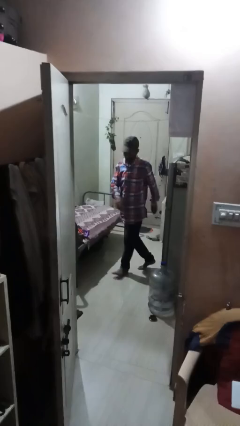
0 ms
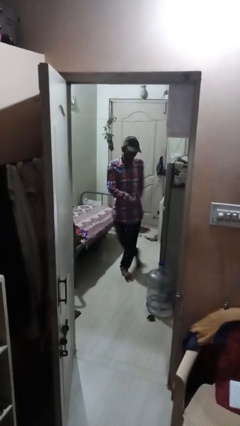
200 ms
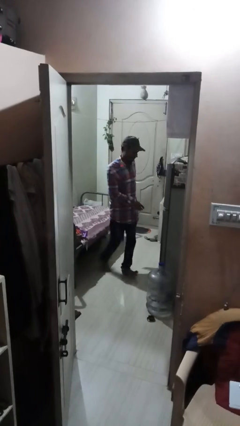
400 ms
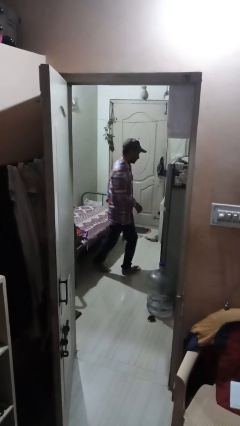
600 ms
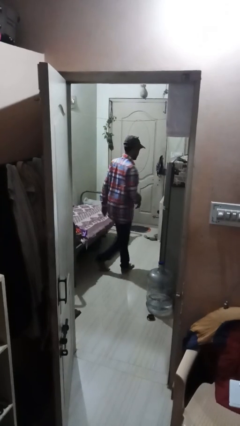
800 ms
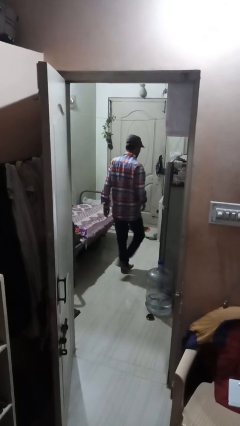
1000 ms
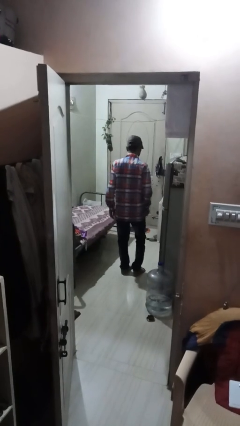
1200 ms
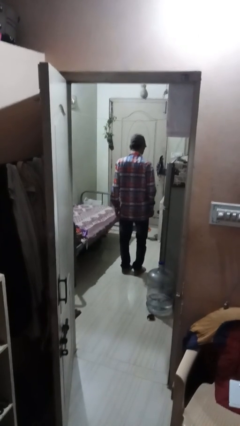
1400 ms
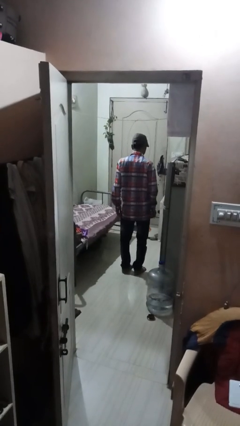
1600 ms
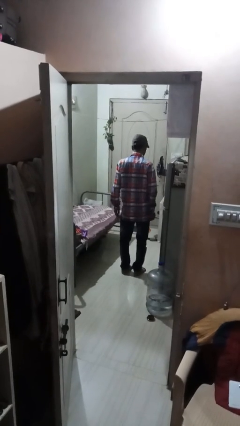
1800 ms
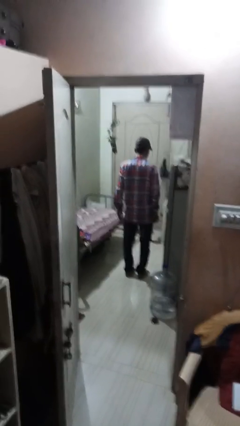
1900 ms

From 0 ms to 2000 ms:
person twirls

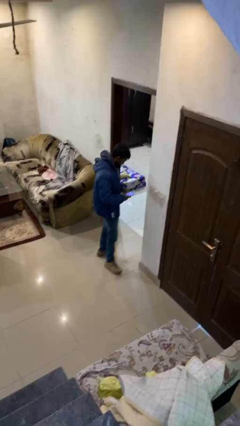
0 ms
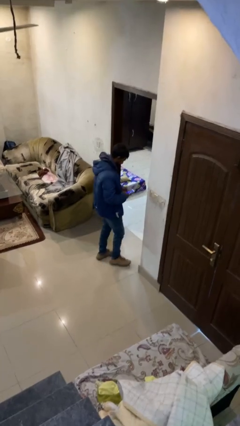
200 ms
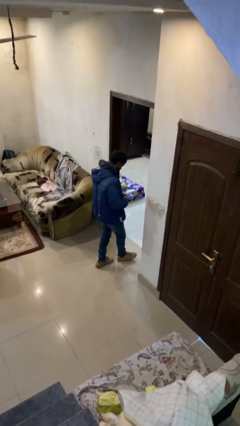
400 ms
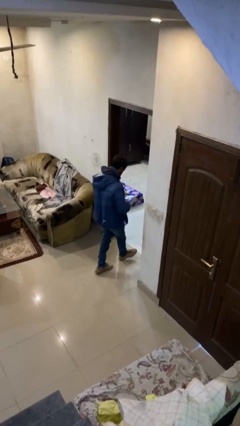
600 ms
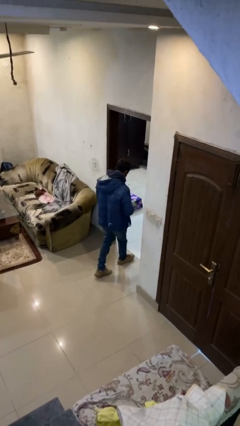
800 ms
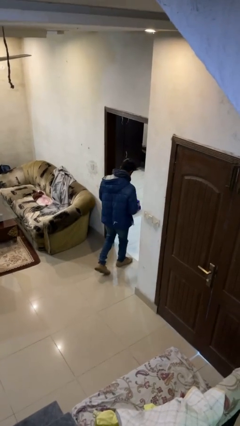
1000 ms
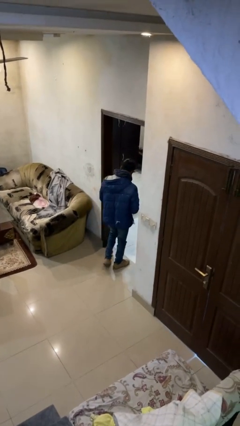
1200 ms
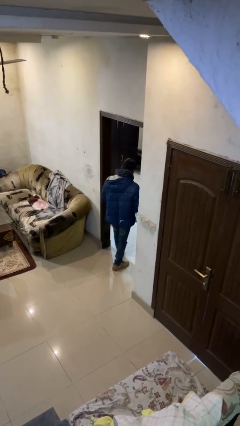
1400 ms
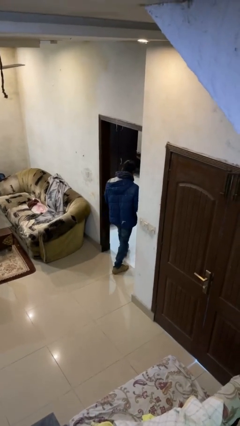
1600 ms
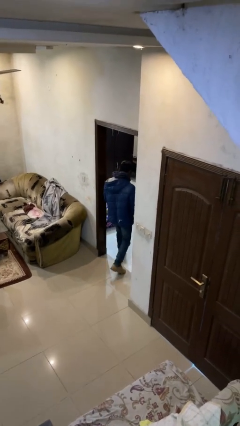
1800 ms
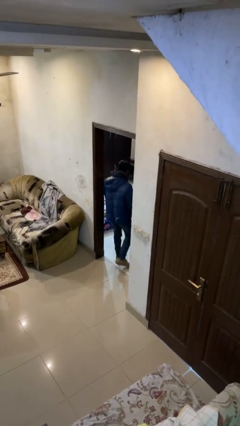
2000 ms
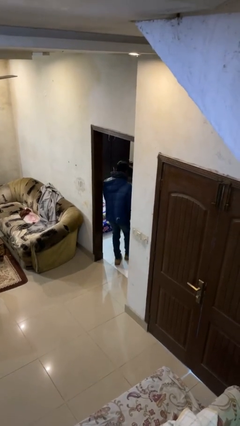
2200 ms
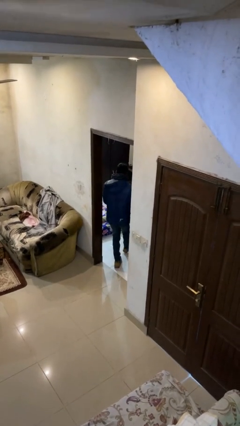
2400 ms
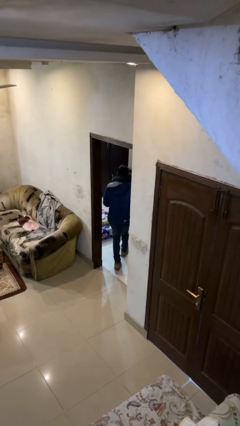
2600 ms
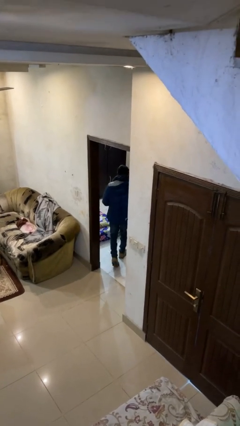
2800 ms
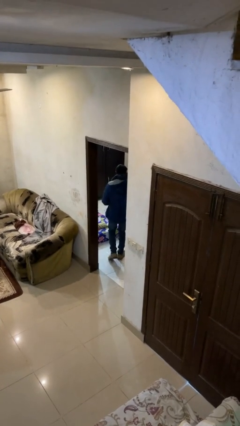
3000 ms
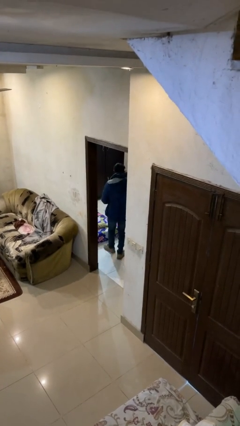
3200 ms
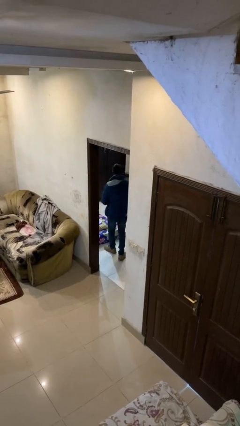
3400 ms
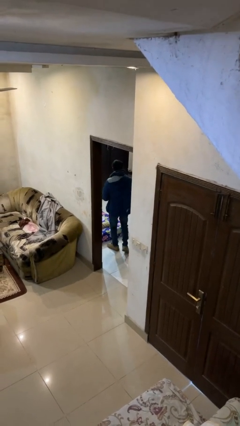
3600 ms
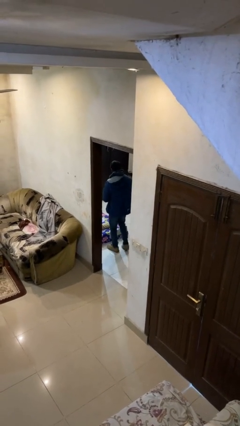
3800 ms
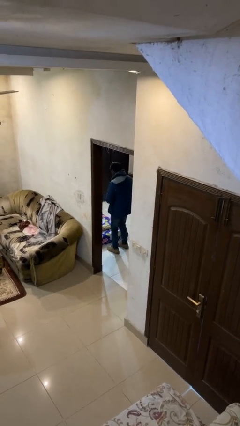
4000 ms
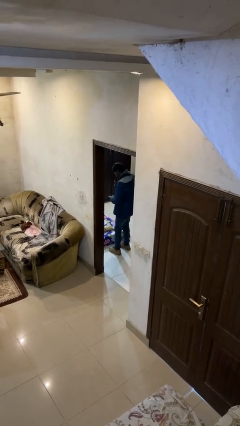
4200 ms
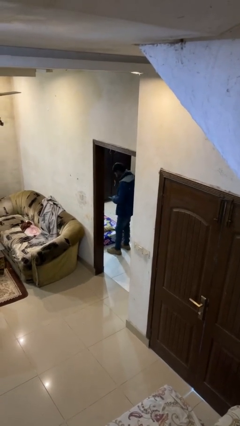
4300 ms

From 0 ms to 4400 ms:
person exits scene through structure

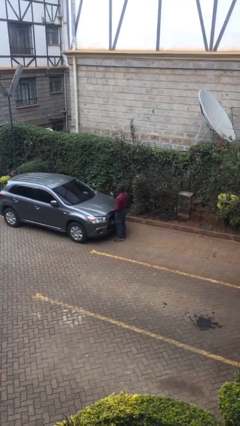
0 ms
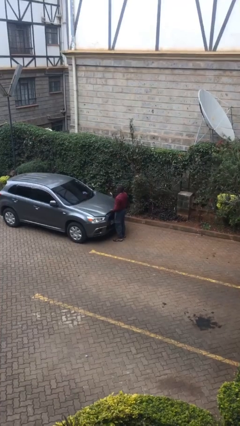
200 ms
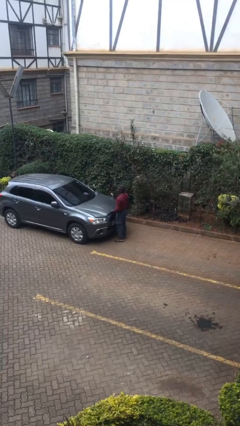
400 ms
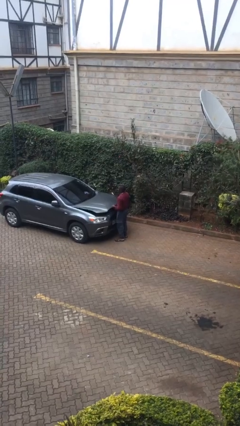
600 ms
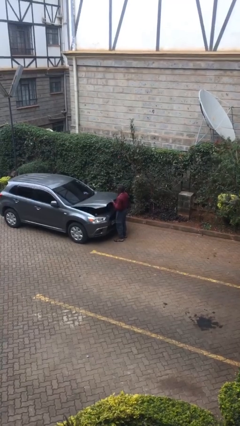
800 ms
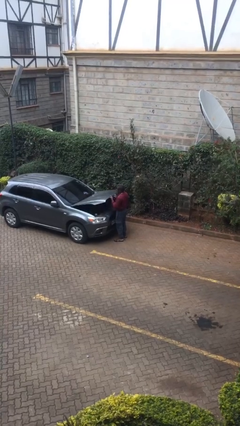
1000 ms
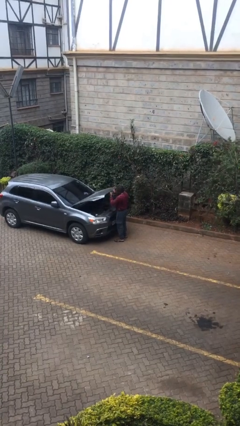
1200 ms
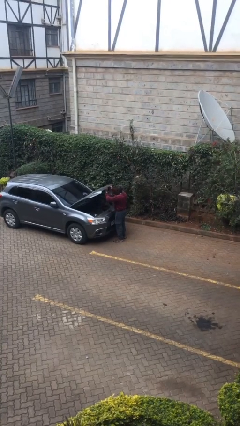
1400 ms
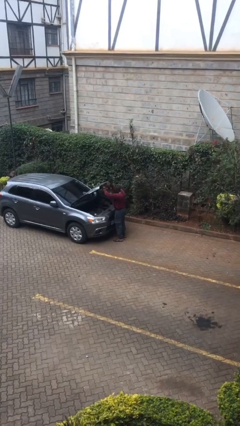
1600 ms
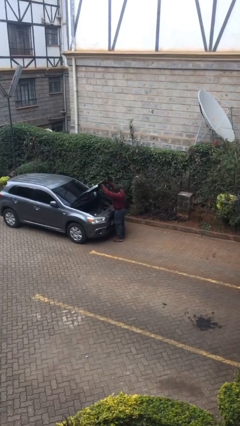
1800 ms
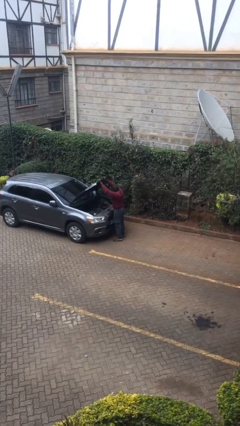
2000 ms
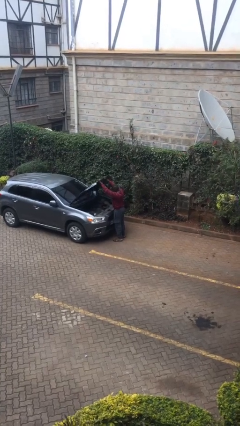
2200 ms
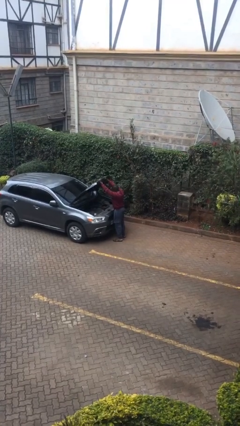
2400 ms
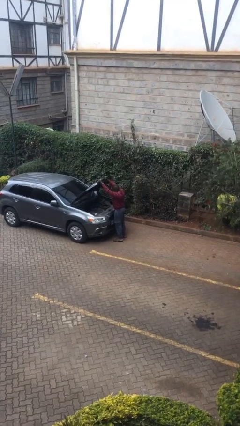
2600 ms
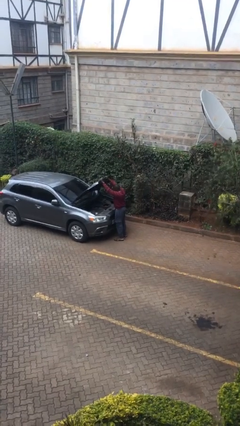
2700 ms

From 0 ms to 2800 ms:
person opens car hood

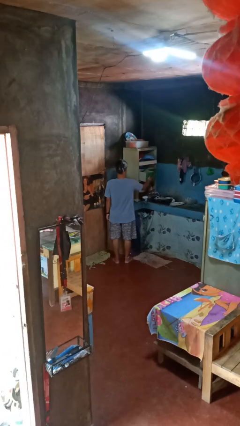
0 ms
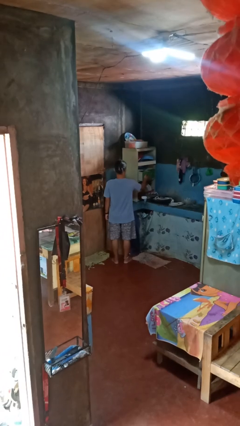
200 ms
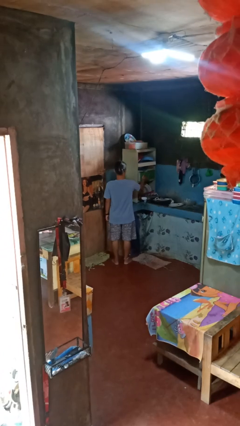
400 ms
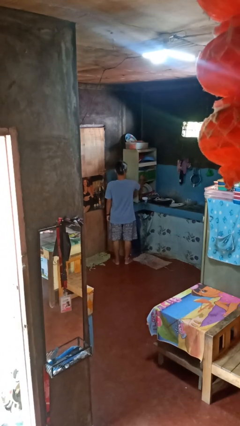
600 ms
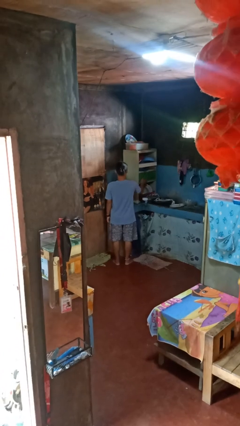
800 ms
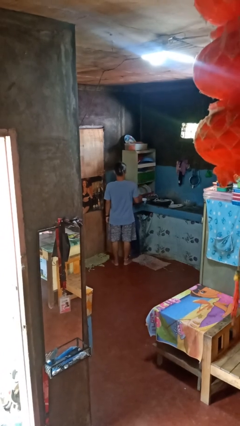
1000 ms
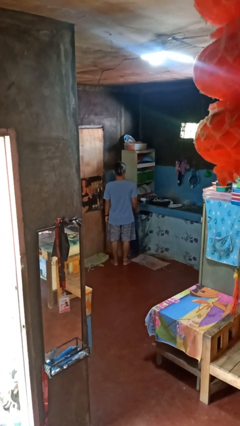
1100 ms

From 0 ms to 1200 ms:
person closes kitchen drawer

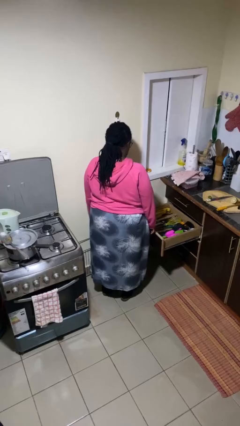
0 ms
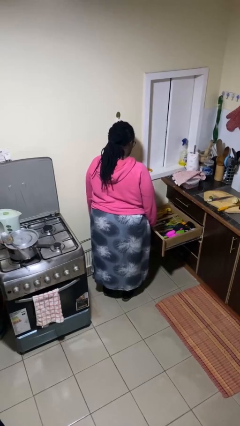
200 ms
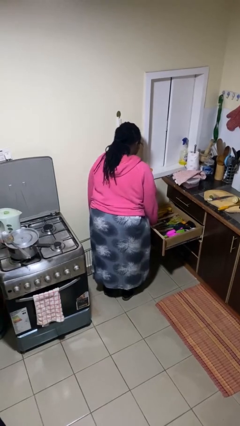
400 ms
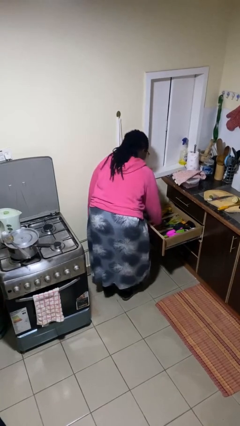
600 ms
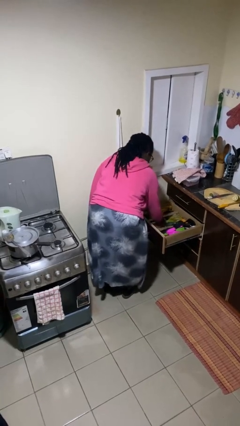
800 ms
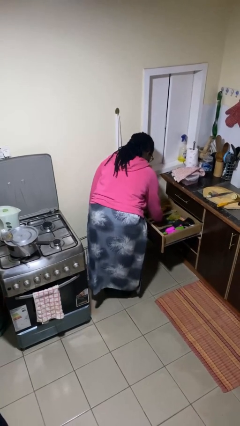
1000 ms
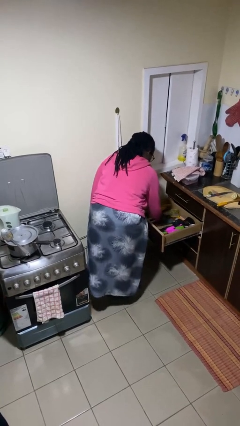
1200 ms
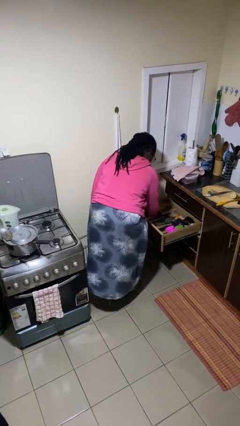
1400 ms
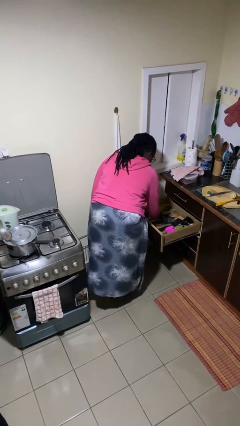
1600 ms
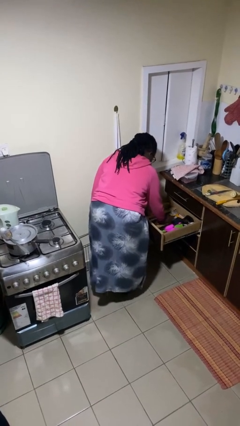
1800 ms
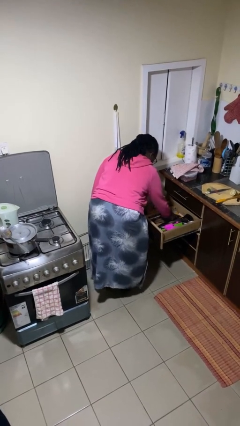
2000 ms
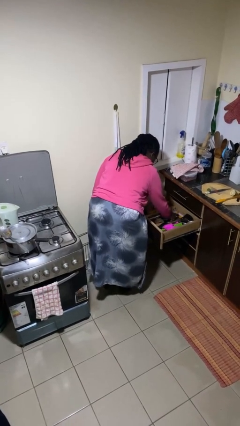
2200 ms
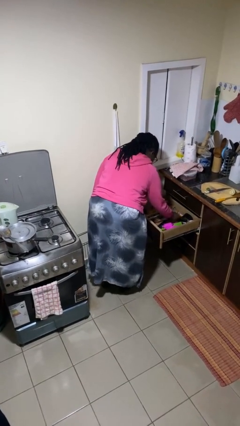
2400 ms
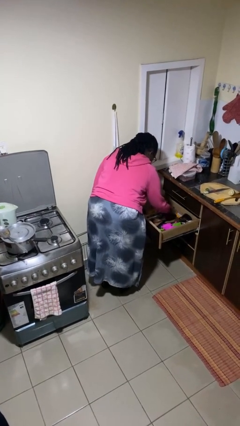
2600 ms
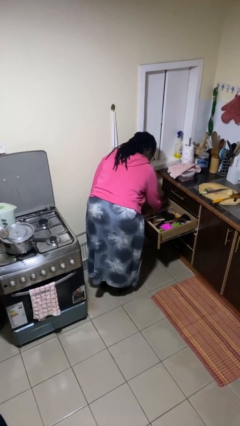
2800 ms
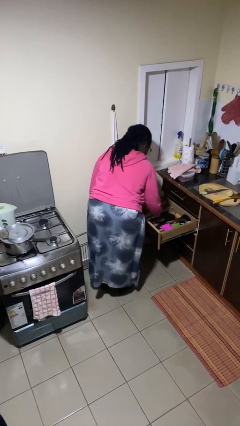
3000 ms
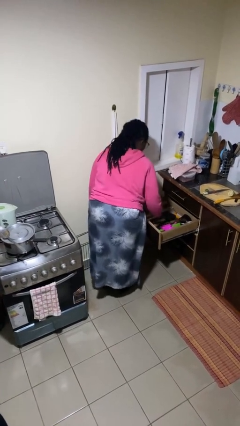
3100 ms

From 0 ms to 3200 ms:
person searches in kitchen drawer

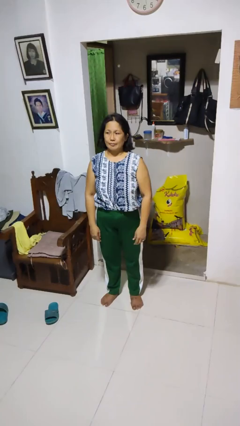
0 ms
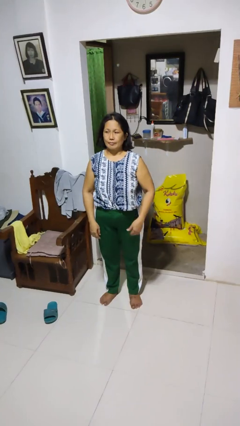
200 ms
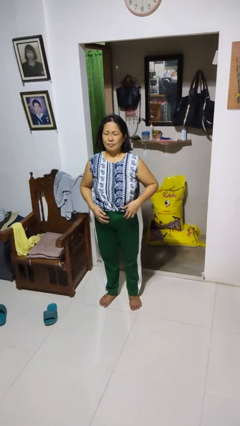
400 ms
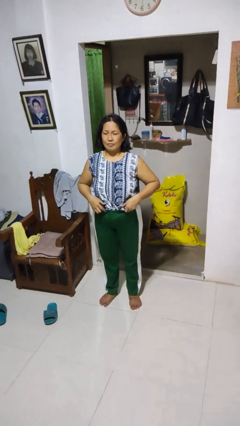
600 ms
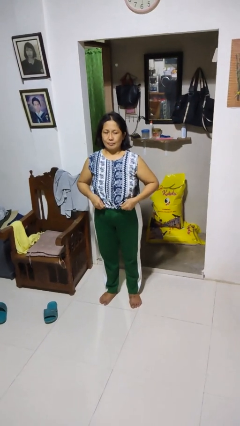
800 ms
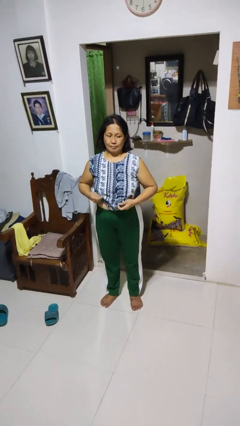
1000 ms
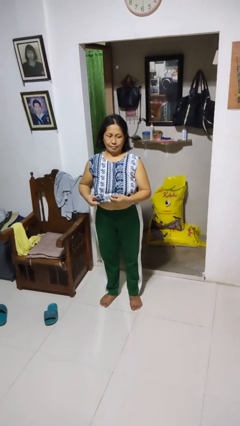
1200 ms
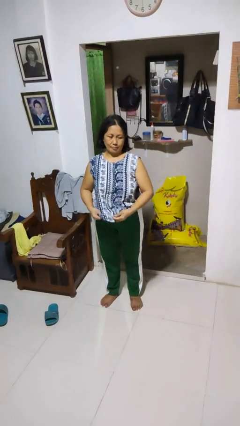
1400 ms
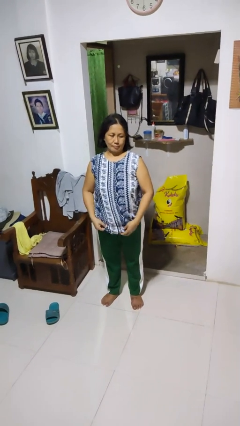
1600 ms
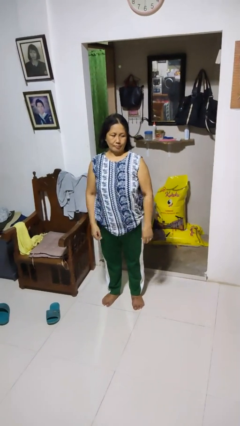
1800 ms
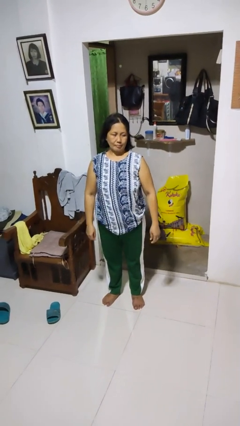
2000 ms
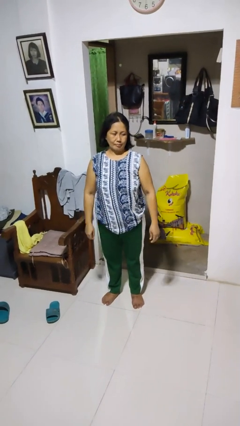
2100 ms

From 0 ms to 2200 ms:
person untucks shirt

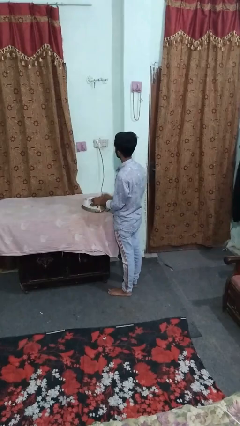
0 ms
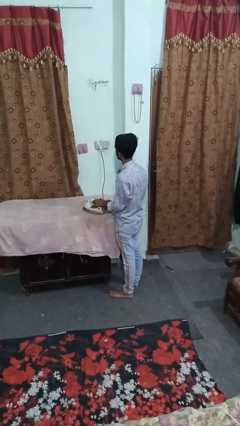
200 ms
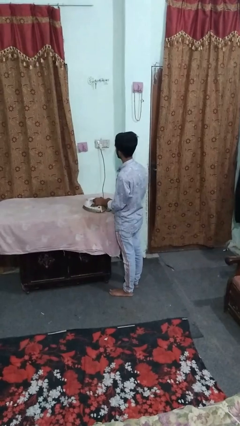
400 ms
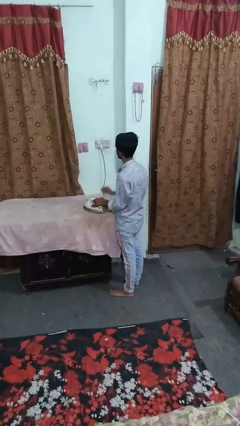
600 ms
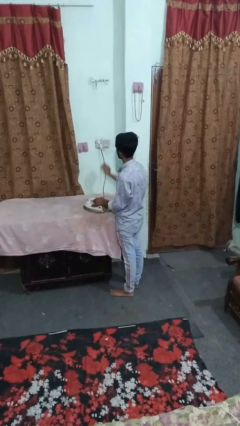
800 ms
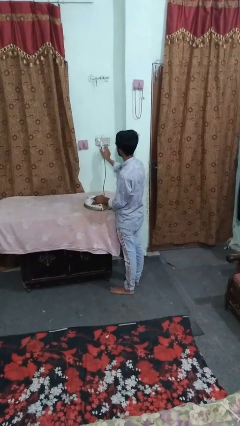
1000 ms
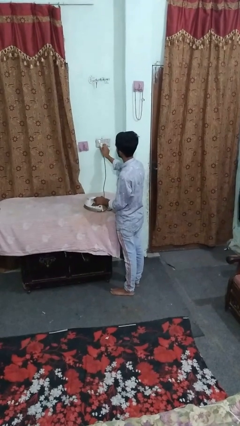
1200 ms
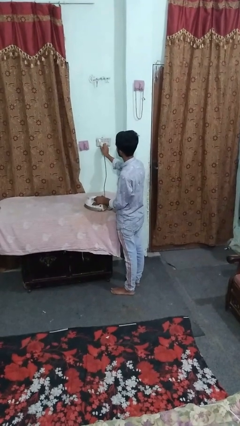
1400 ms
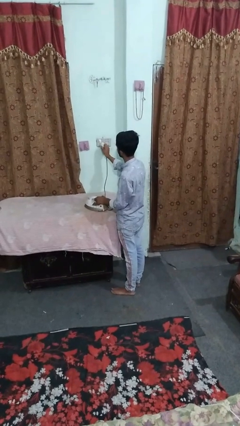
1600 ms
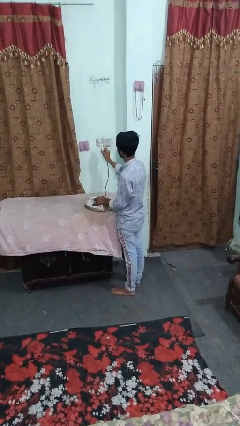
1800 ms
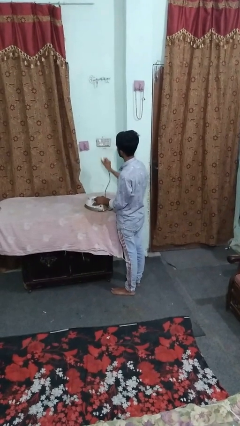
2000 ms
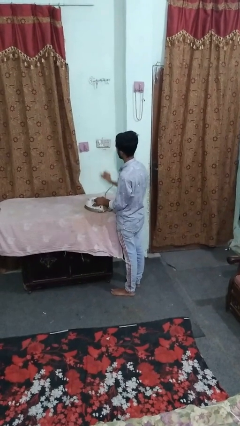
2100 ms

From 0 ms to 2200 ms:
person unplugs from electrical socket
